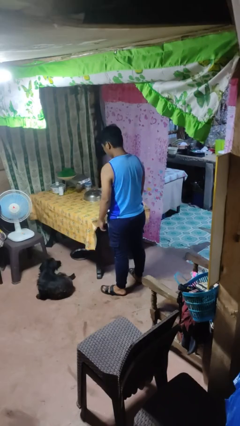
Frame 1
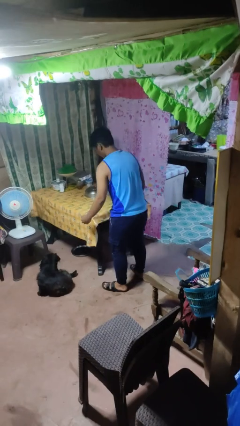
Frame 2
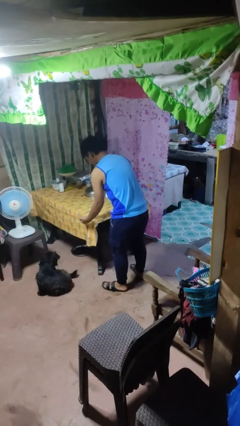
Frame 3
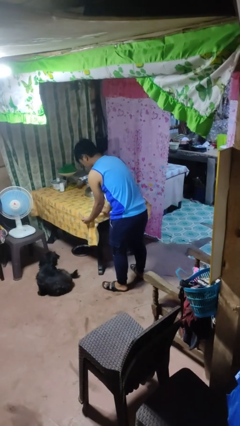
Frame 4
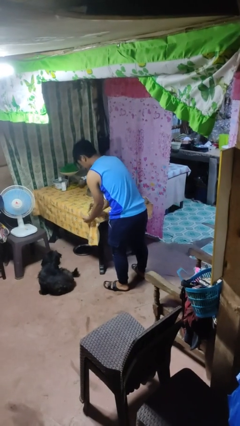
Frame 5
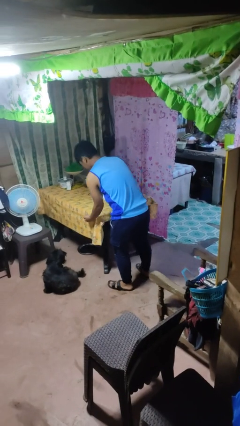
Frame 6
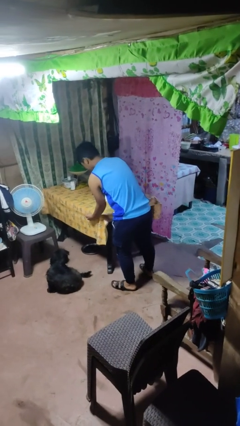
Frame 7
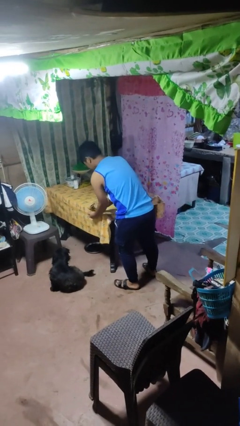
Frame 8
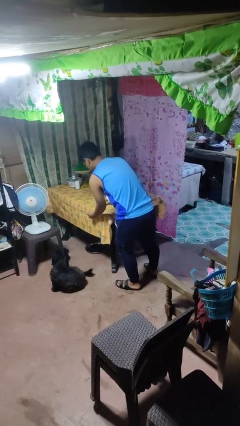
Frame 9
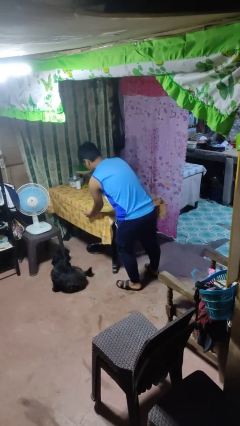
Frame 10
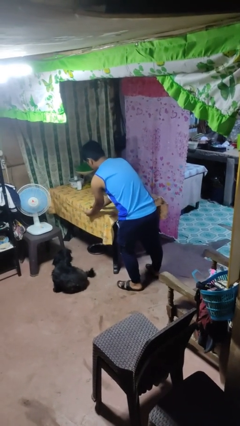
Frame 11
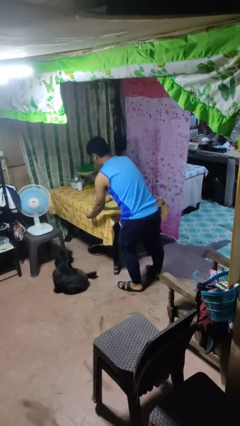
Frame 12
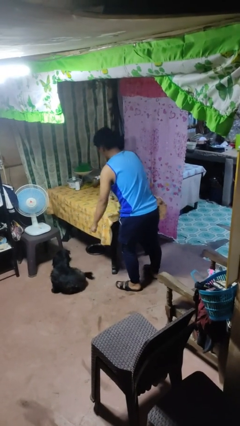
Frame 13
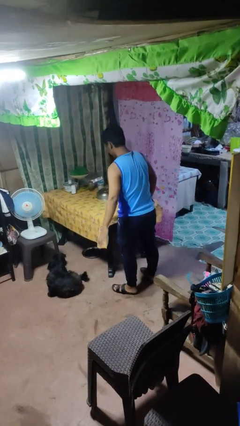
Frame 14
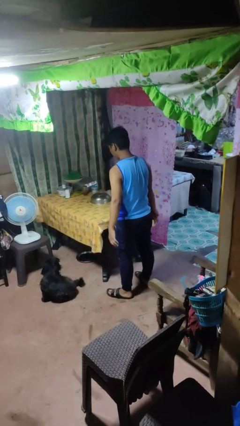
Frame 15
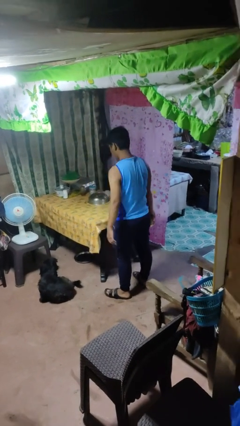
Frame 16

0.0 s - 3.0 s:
person cleans table with rag

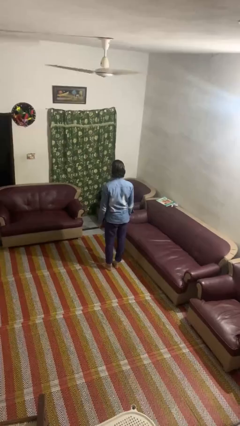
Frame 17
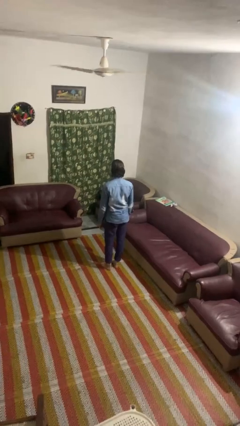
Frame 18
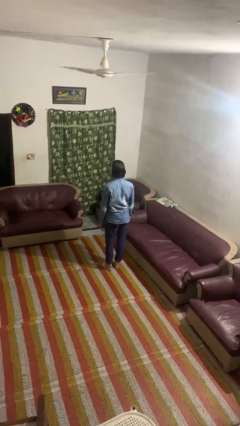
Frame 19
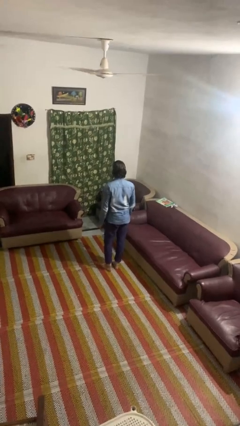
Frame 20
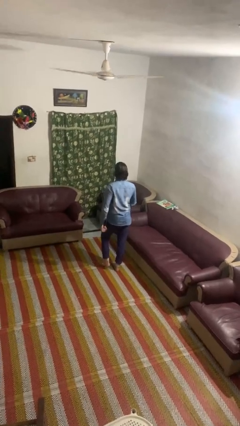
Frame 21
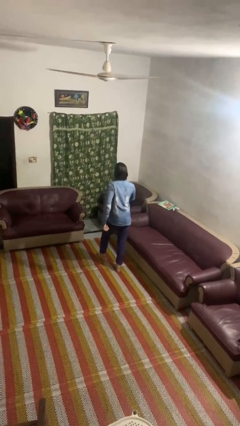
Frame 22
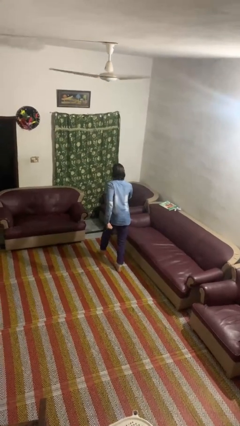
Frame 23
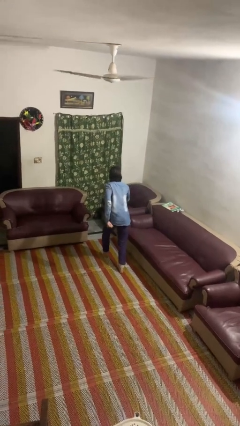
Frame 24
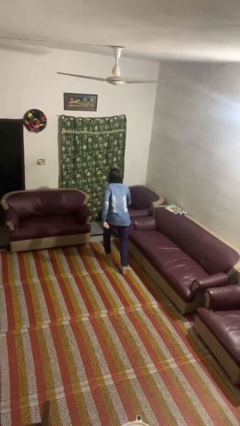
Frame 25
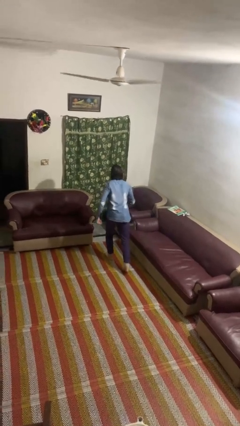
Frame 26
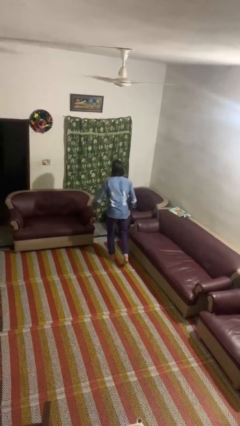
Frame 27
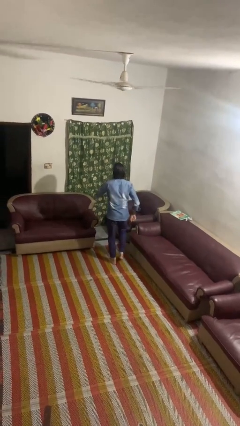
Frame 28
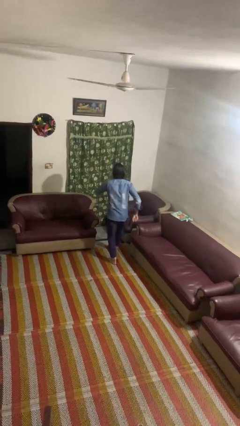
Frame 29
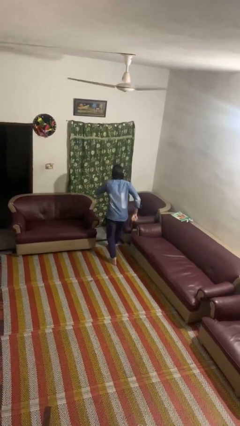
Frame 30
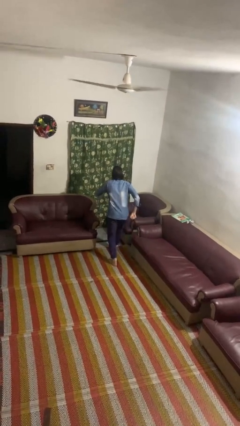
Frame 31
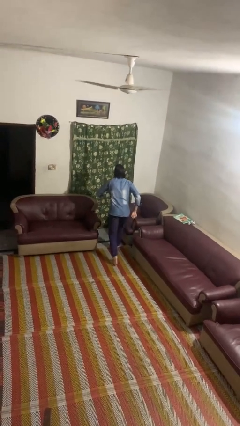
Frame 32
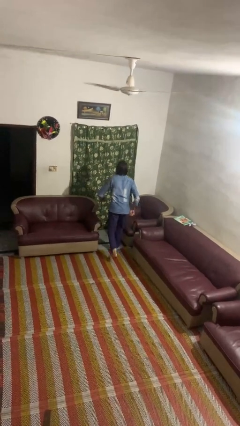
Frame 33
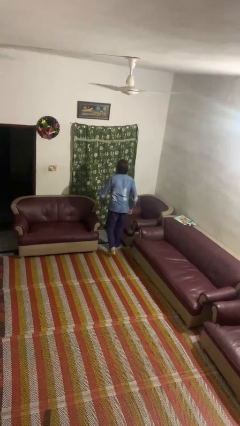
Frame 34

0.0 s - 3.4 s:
person walks tiptoe

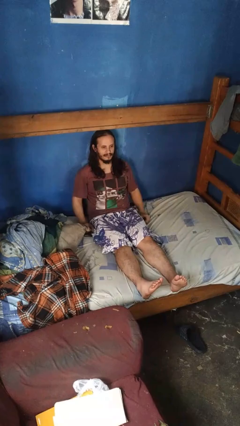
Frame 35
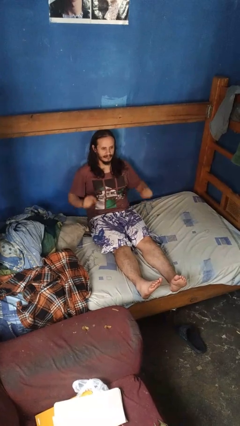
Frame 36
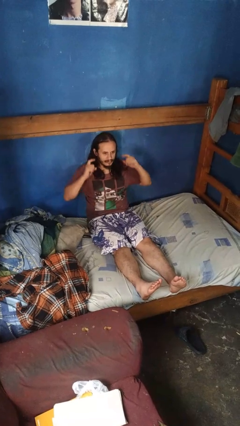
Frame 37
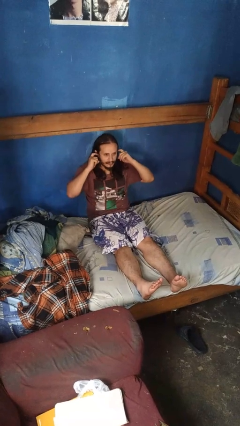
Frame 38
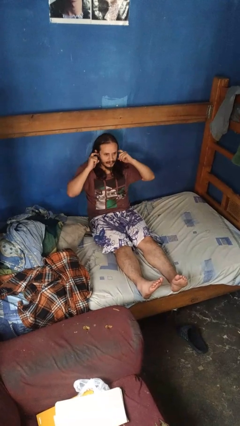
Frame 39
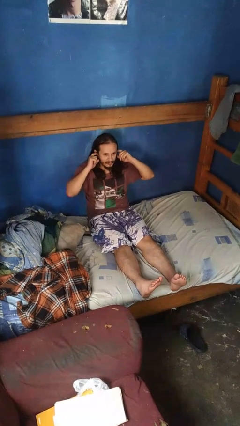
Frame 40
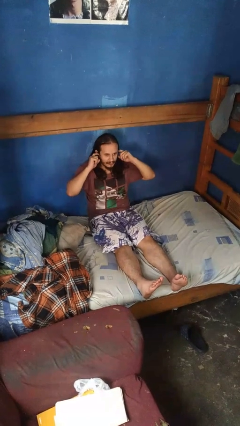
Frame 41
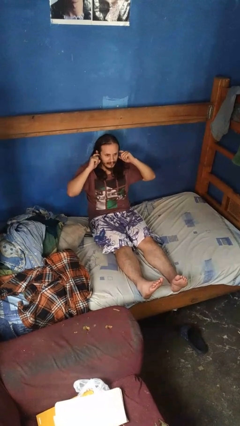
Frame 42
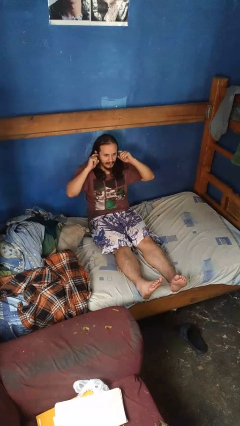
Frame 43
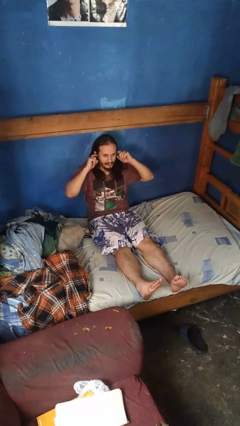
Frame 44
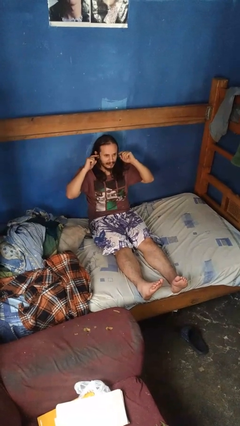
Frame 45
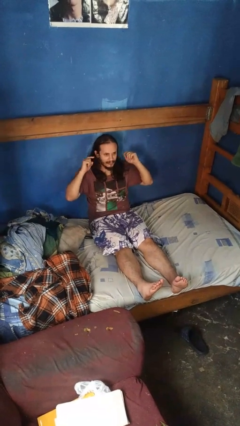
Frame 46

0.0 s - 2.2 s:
person puts fingers in ear

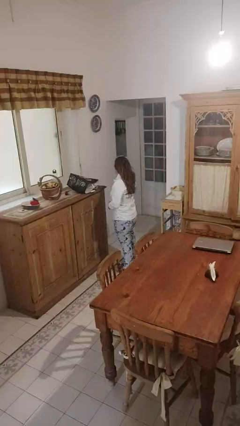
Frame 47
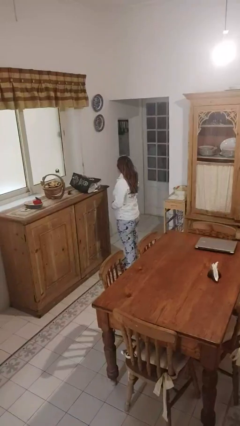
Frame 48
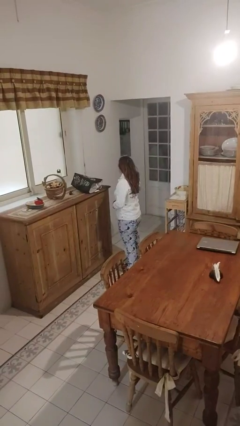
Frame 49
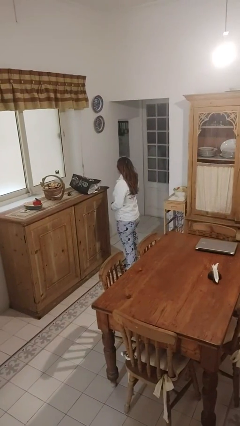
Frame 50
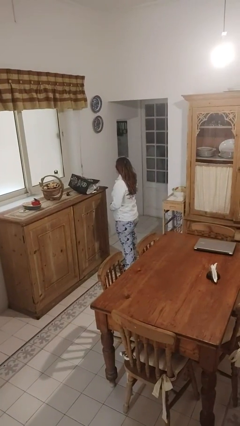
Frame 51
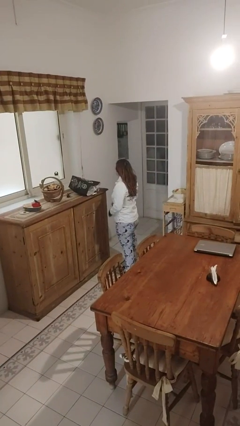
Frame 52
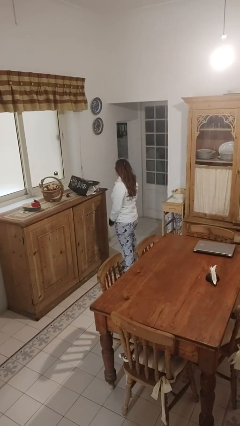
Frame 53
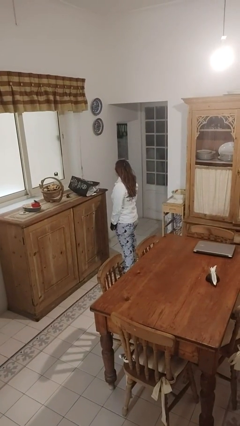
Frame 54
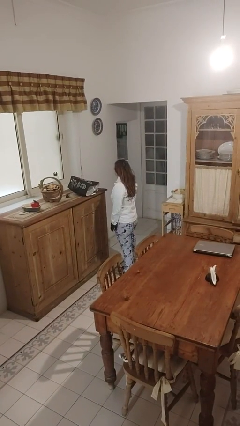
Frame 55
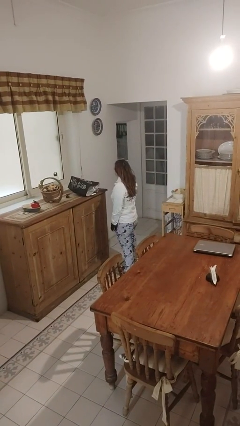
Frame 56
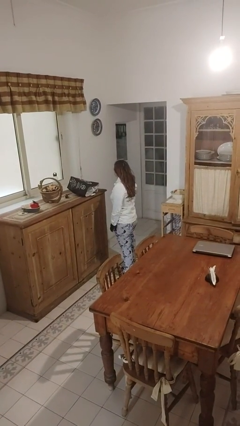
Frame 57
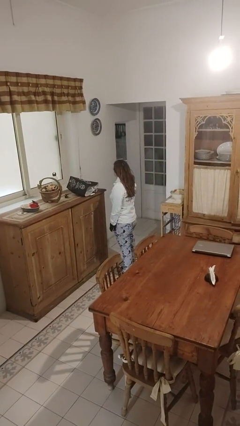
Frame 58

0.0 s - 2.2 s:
person unbuttons shirt

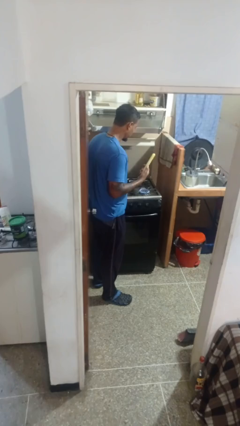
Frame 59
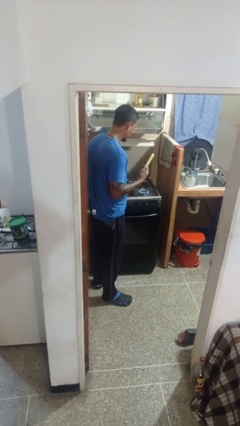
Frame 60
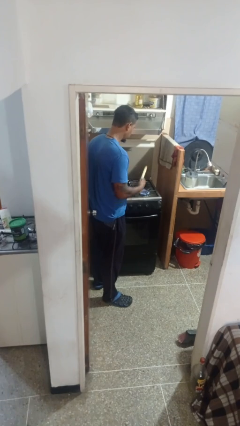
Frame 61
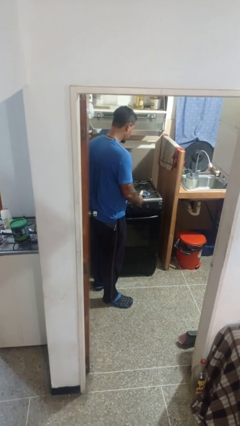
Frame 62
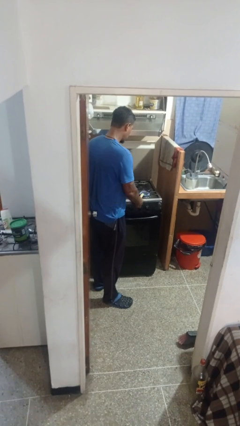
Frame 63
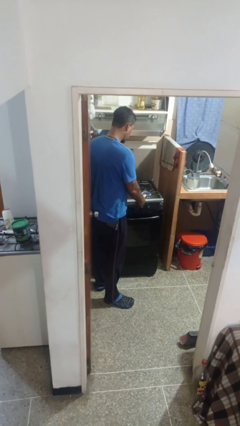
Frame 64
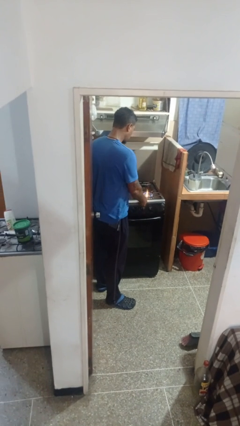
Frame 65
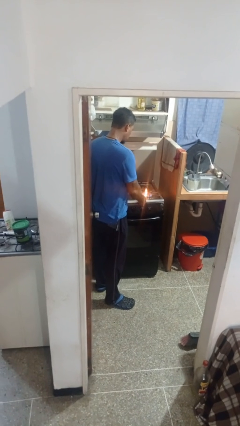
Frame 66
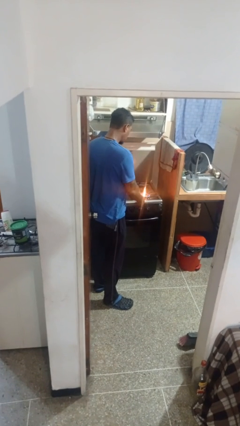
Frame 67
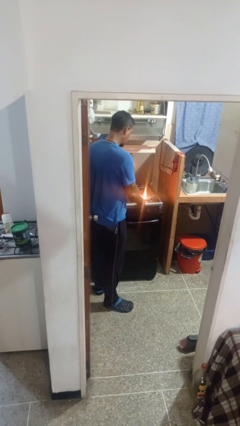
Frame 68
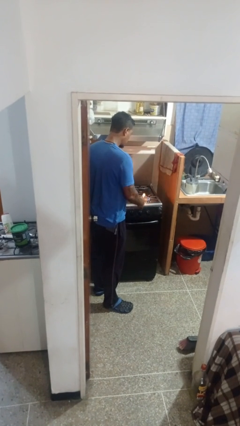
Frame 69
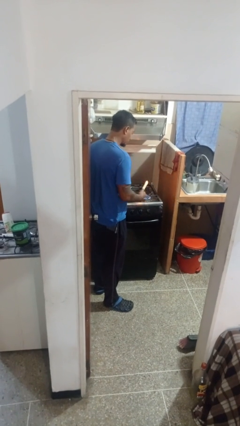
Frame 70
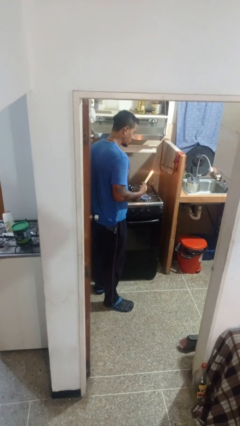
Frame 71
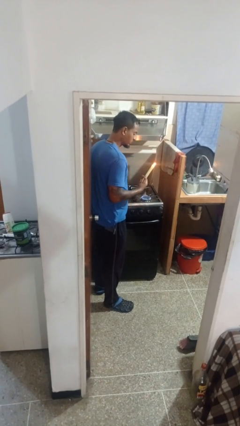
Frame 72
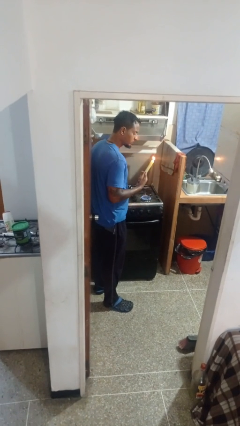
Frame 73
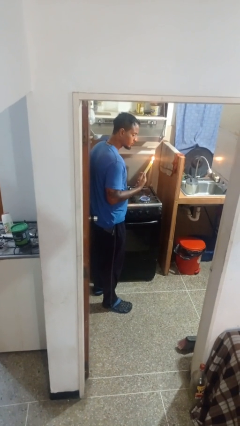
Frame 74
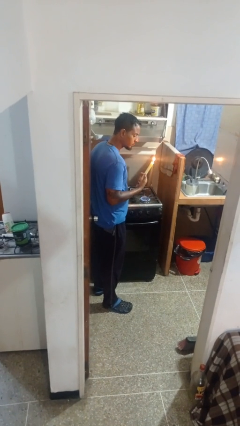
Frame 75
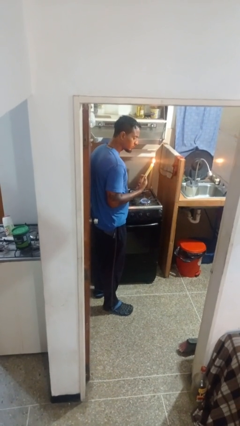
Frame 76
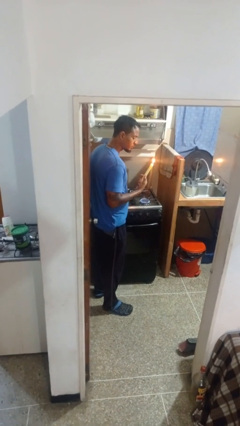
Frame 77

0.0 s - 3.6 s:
person lights candle

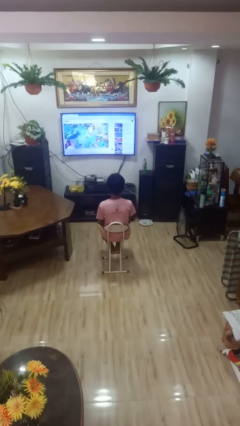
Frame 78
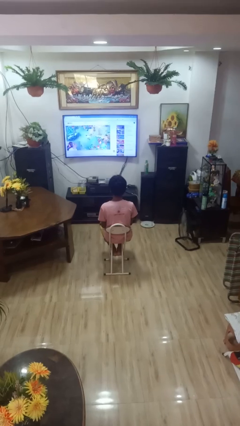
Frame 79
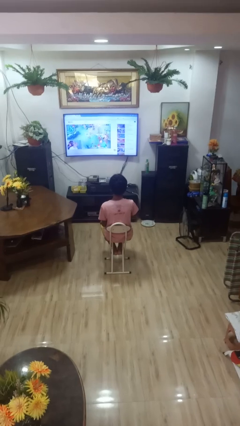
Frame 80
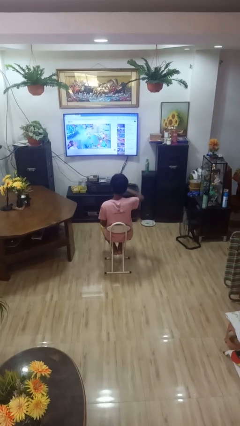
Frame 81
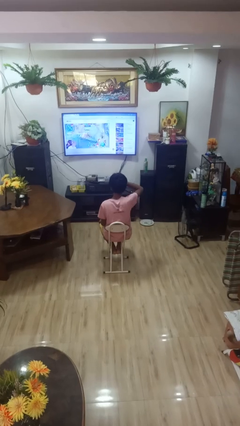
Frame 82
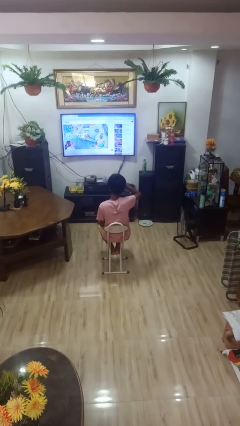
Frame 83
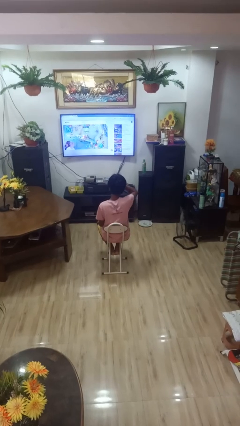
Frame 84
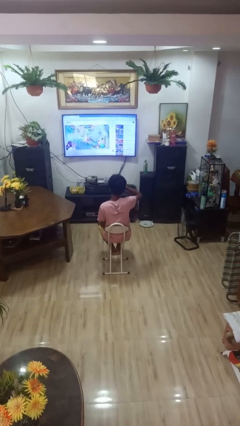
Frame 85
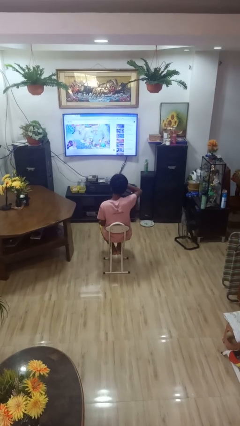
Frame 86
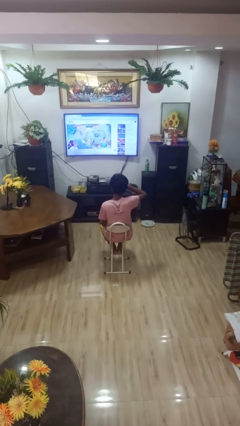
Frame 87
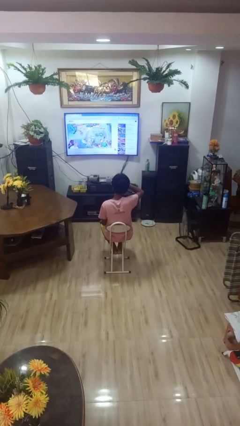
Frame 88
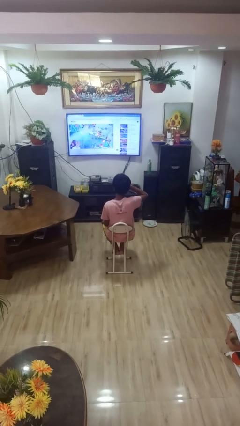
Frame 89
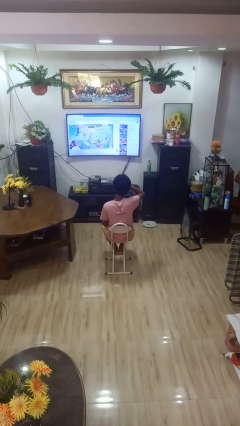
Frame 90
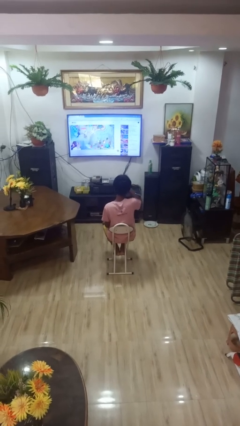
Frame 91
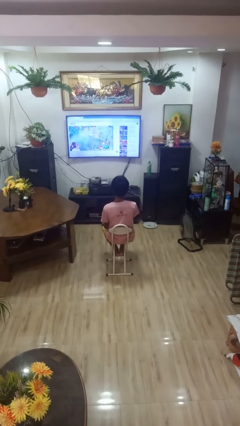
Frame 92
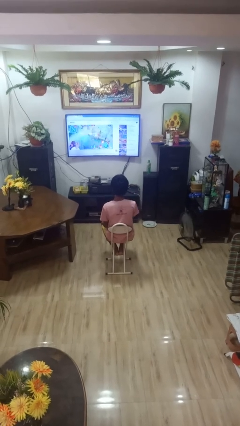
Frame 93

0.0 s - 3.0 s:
person rubs eyes
